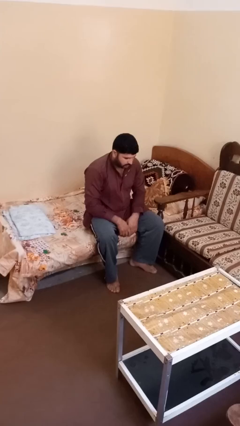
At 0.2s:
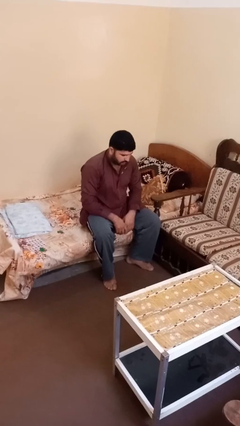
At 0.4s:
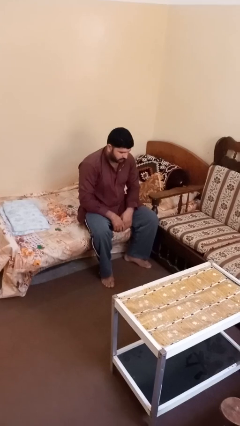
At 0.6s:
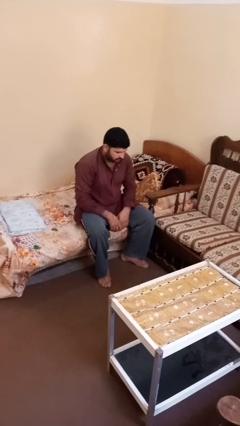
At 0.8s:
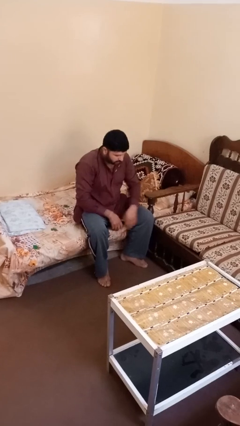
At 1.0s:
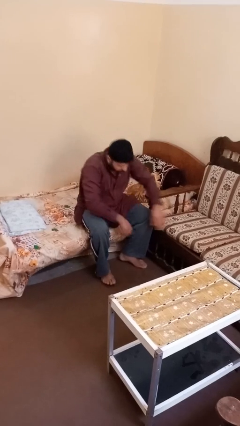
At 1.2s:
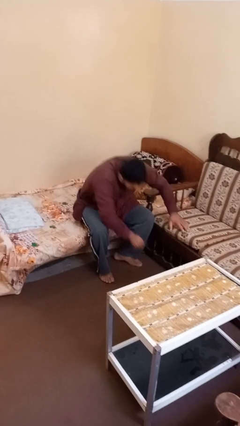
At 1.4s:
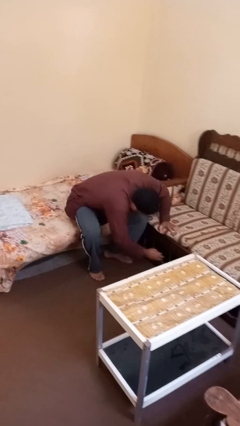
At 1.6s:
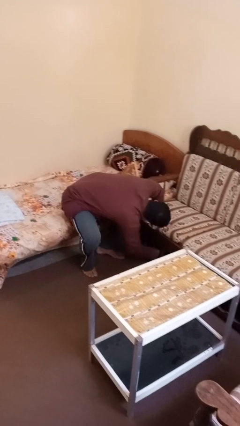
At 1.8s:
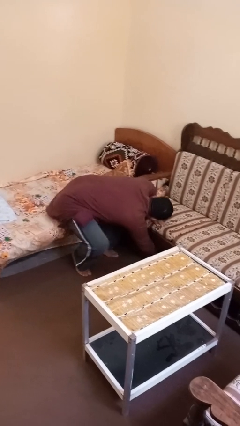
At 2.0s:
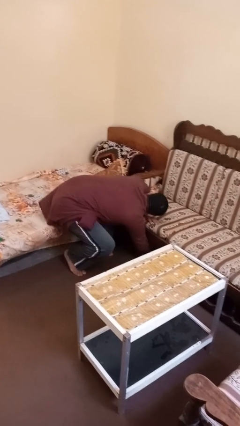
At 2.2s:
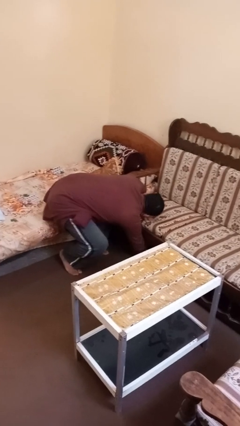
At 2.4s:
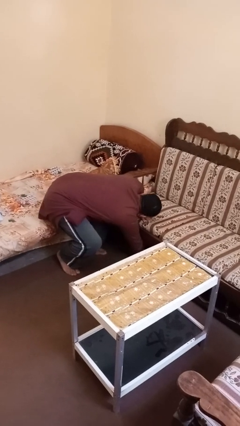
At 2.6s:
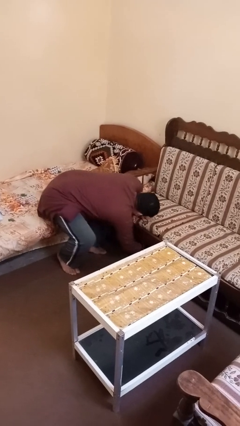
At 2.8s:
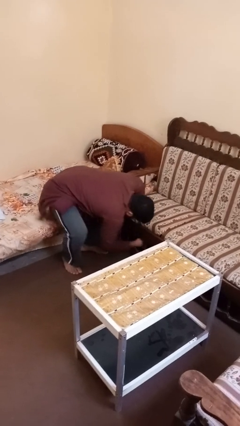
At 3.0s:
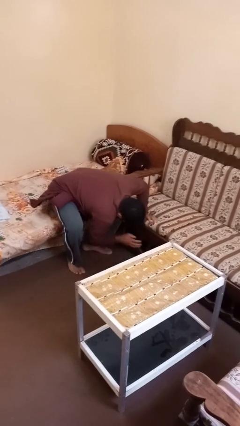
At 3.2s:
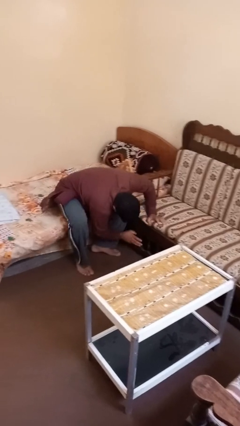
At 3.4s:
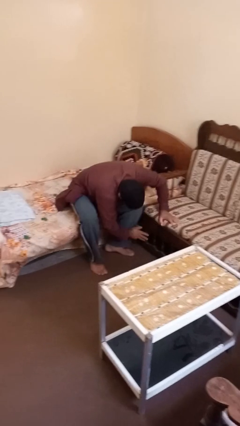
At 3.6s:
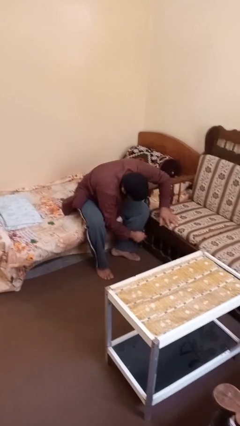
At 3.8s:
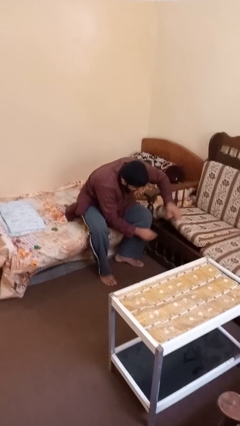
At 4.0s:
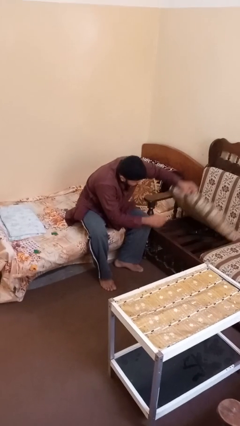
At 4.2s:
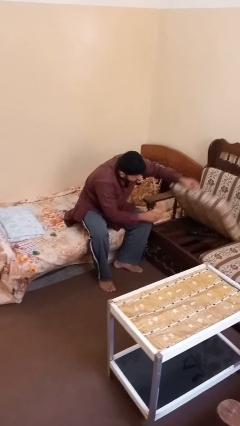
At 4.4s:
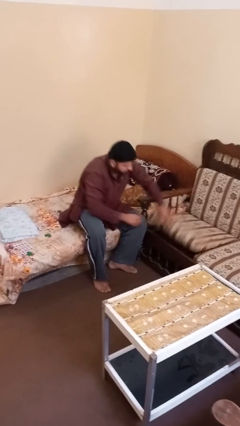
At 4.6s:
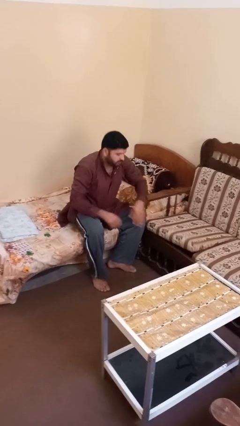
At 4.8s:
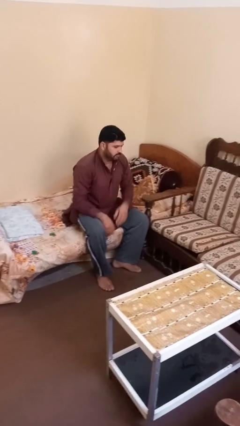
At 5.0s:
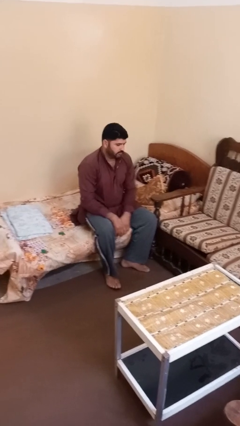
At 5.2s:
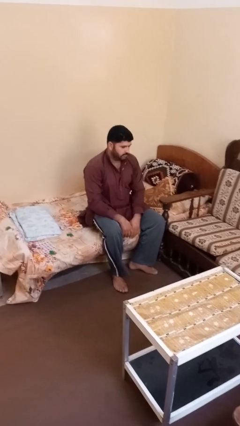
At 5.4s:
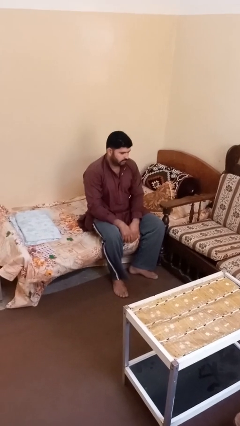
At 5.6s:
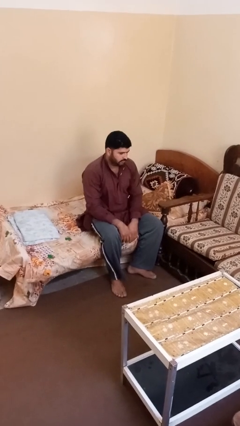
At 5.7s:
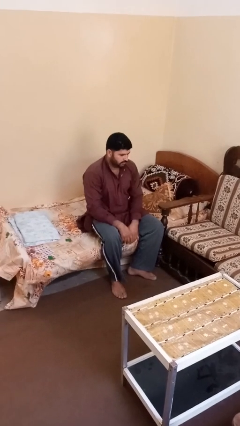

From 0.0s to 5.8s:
person searches under couch

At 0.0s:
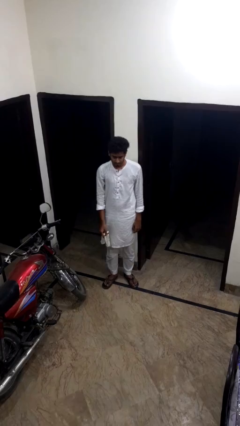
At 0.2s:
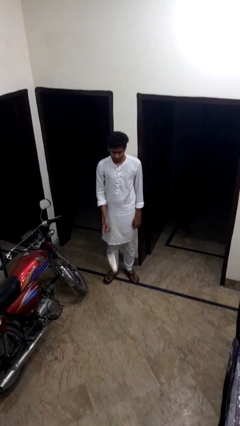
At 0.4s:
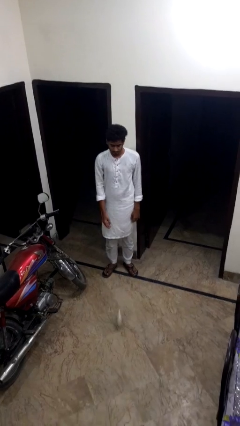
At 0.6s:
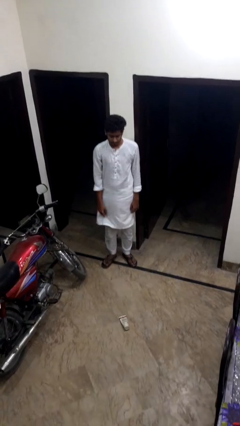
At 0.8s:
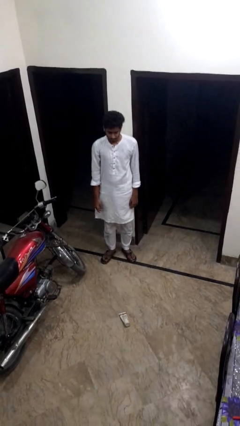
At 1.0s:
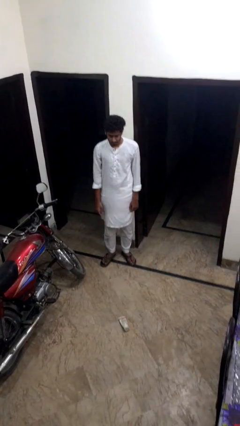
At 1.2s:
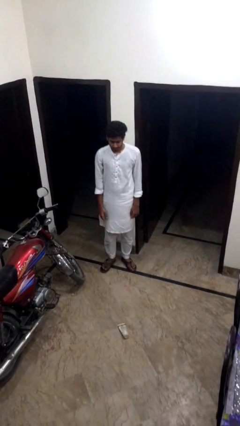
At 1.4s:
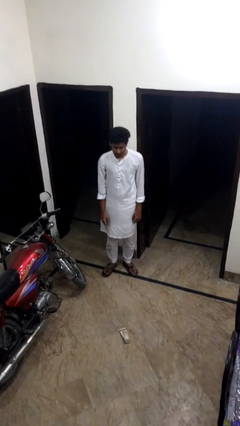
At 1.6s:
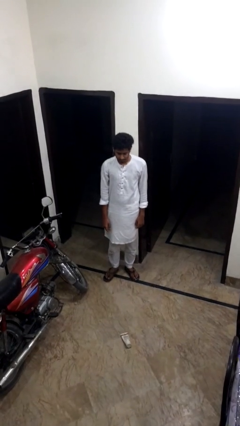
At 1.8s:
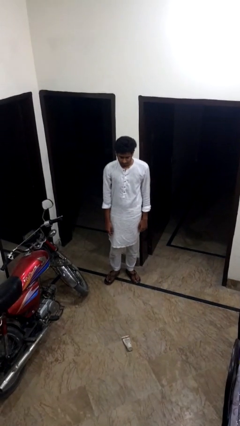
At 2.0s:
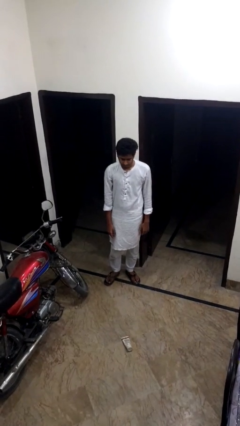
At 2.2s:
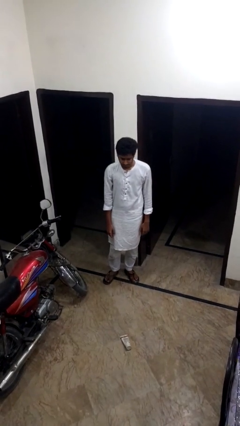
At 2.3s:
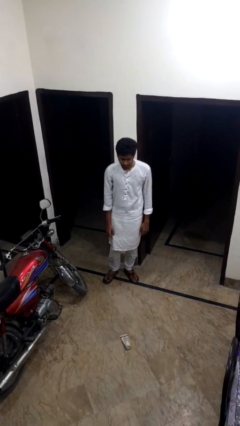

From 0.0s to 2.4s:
person throws object to ground

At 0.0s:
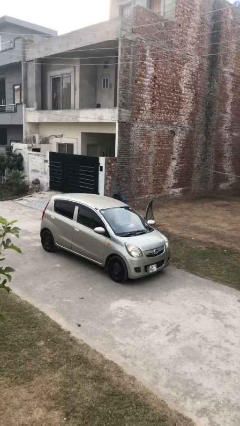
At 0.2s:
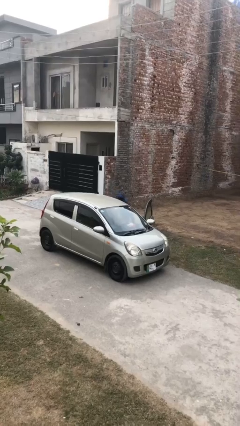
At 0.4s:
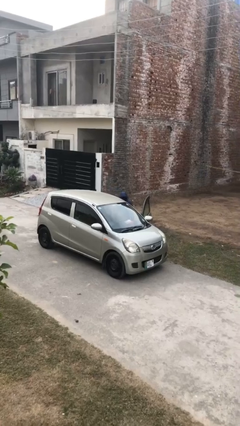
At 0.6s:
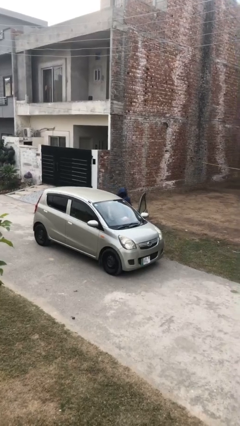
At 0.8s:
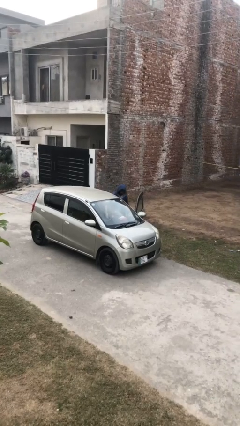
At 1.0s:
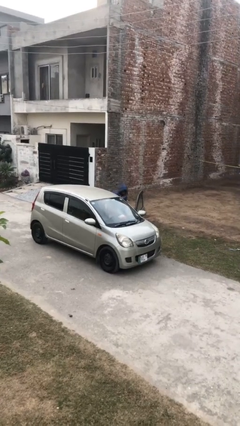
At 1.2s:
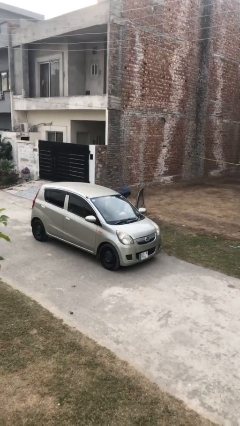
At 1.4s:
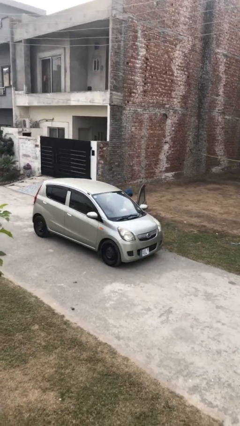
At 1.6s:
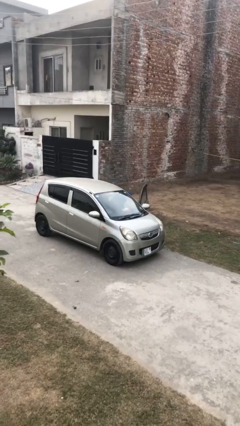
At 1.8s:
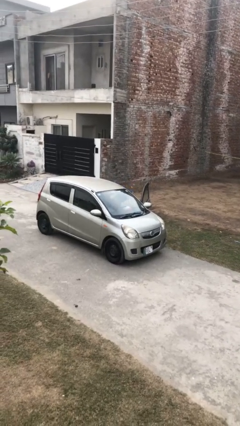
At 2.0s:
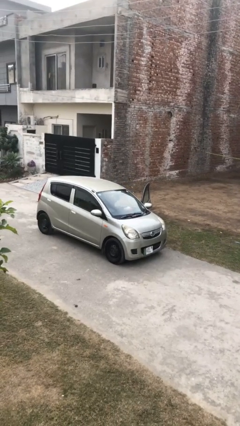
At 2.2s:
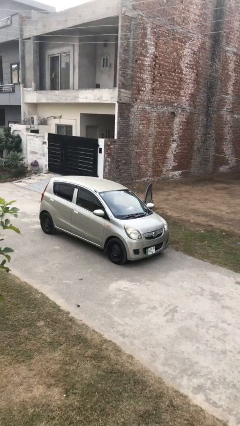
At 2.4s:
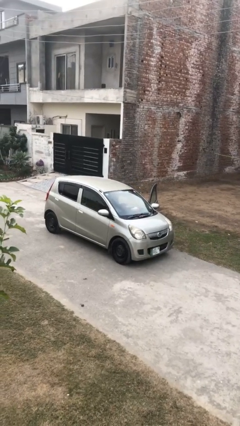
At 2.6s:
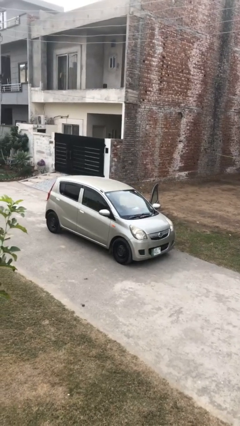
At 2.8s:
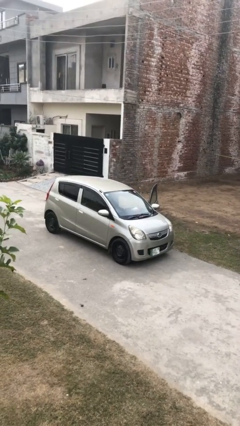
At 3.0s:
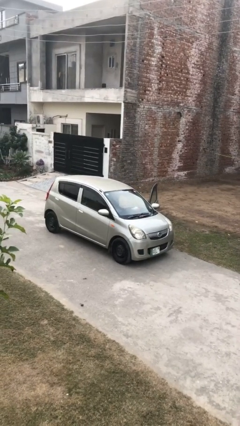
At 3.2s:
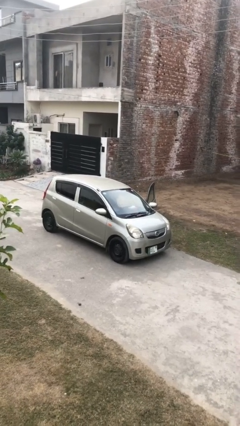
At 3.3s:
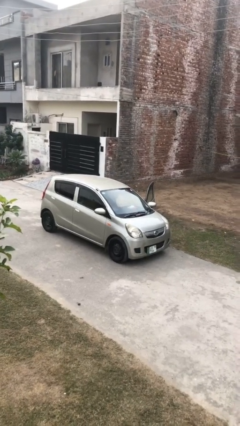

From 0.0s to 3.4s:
person enters car

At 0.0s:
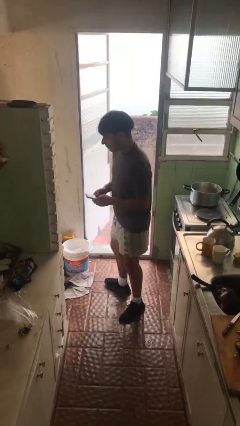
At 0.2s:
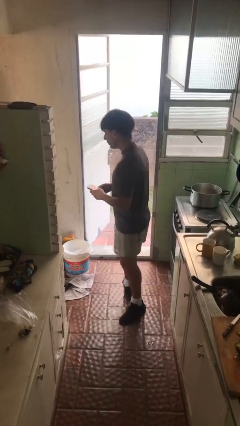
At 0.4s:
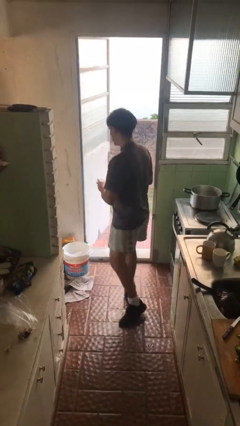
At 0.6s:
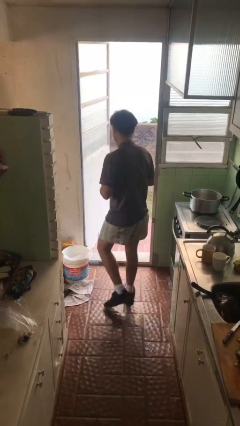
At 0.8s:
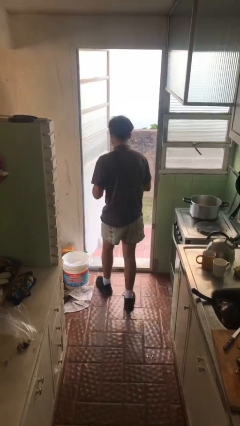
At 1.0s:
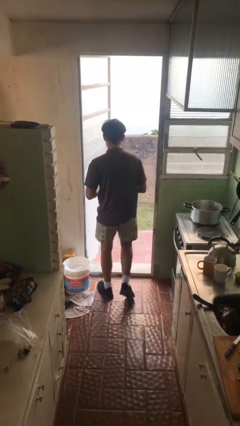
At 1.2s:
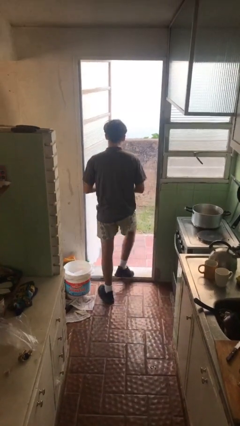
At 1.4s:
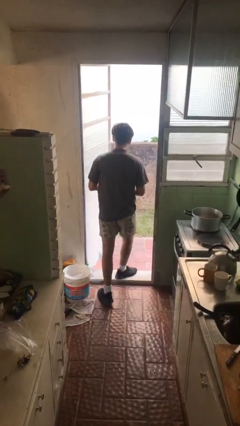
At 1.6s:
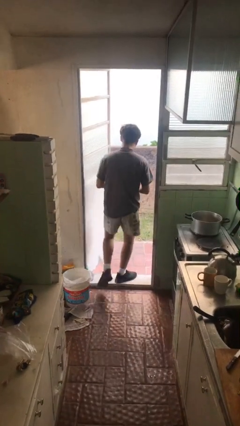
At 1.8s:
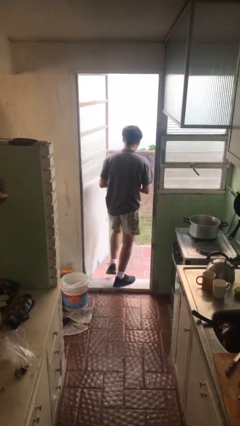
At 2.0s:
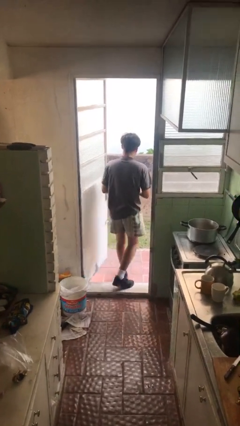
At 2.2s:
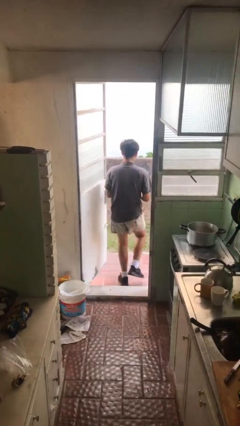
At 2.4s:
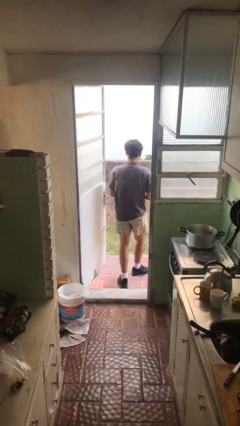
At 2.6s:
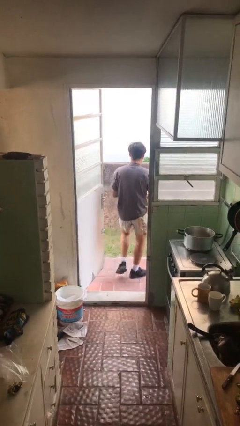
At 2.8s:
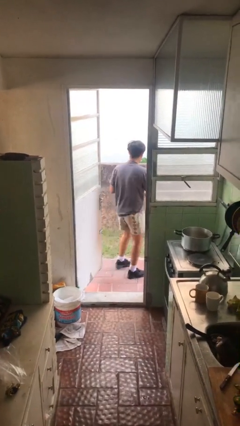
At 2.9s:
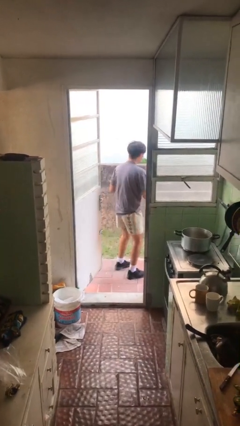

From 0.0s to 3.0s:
person exits scene through structure

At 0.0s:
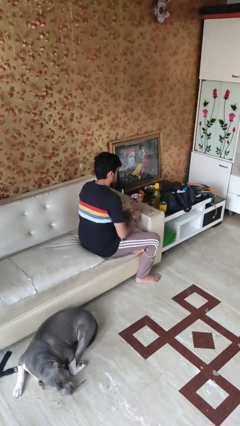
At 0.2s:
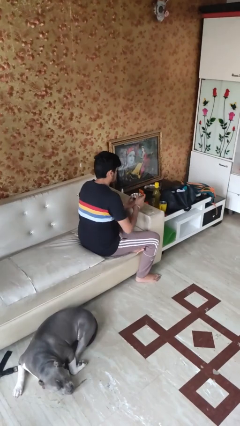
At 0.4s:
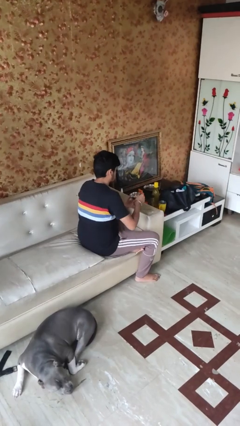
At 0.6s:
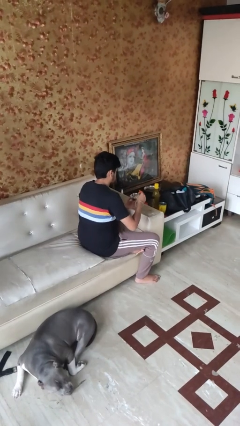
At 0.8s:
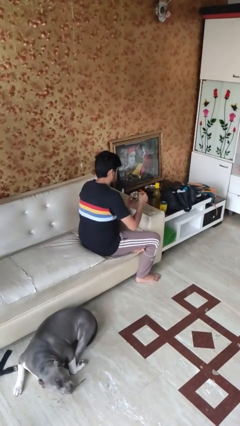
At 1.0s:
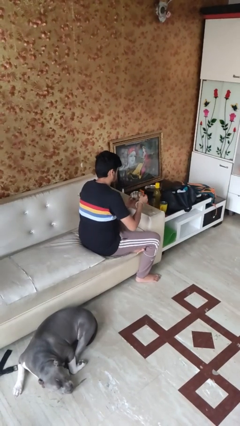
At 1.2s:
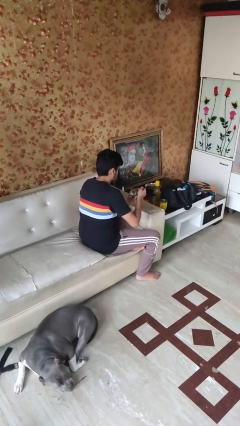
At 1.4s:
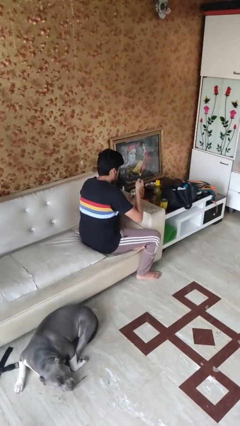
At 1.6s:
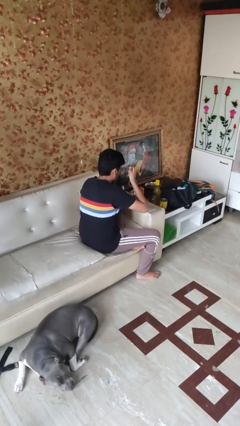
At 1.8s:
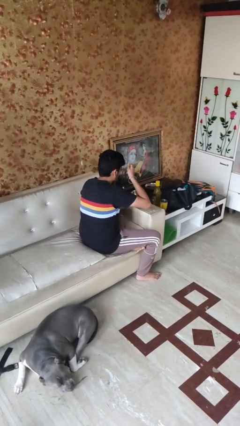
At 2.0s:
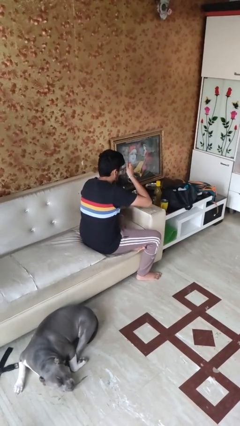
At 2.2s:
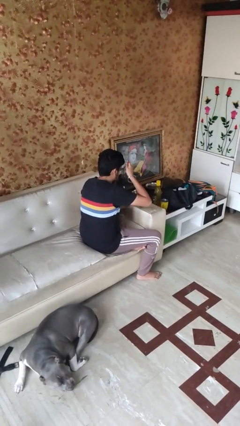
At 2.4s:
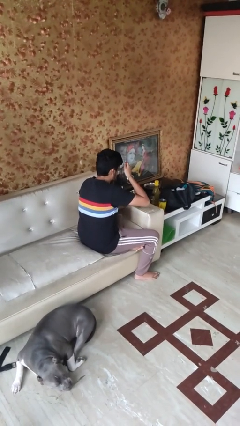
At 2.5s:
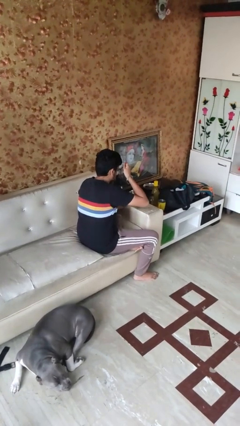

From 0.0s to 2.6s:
person eats with utensil

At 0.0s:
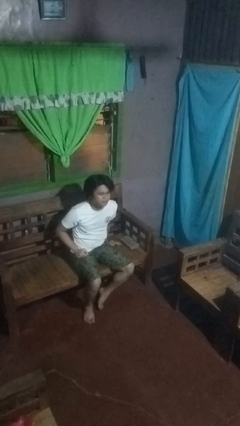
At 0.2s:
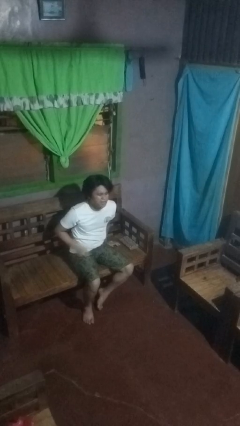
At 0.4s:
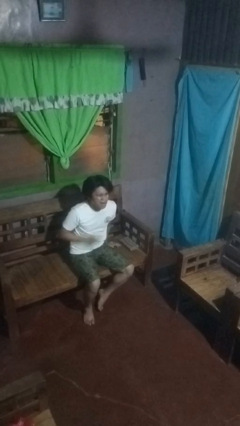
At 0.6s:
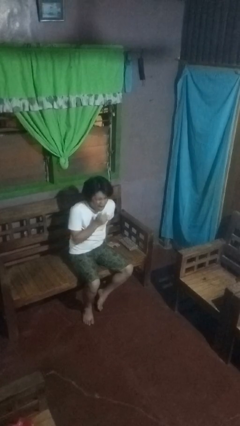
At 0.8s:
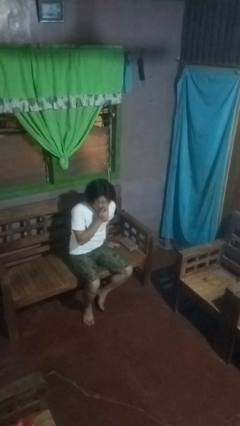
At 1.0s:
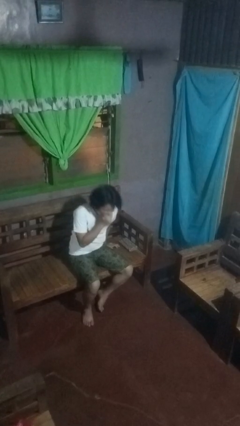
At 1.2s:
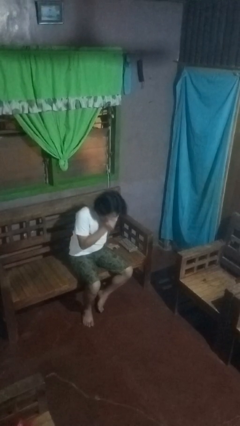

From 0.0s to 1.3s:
person yawns
